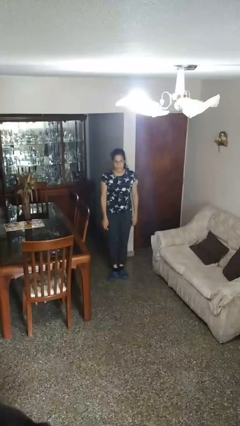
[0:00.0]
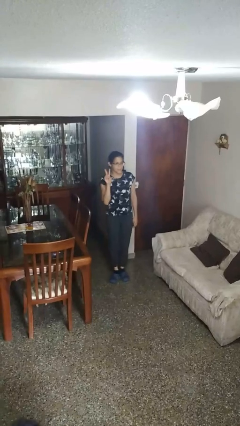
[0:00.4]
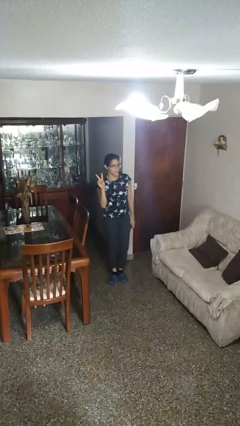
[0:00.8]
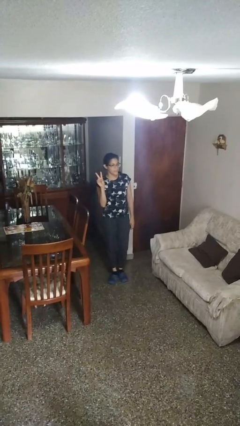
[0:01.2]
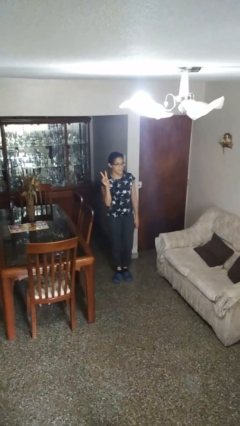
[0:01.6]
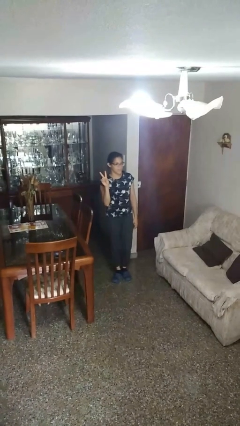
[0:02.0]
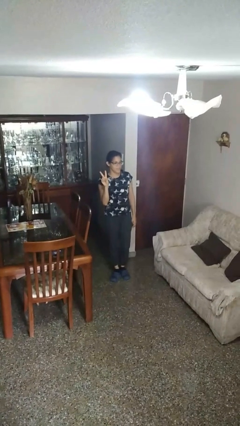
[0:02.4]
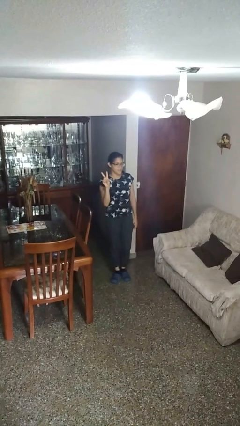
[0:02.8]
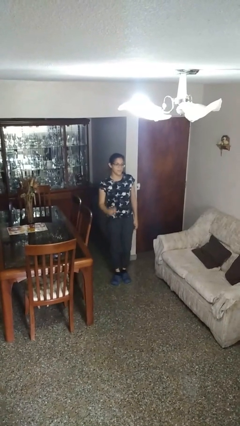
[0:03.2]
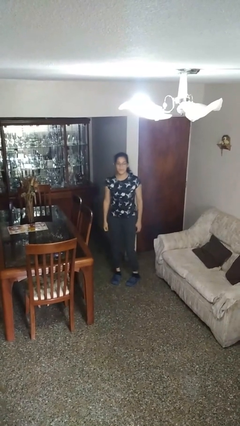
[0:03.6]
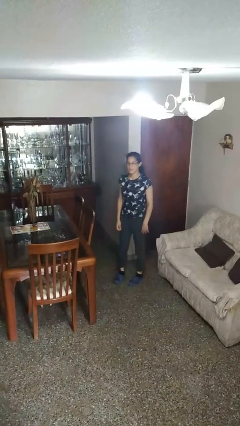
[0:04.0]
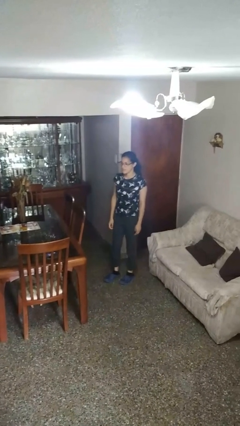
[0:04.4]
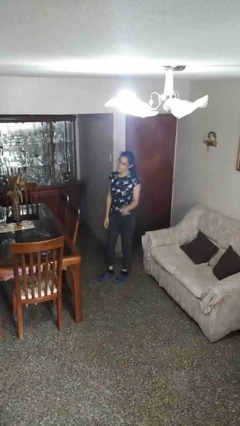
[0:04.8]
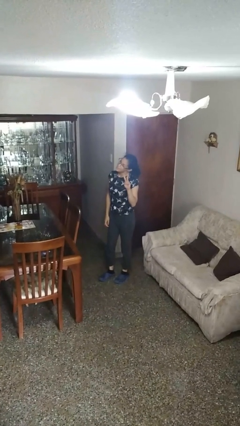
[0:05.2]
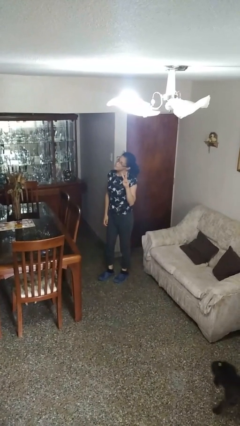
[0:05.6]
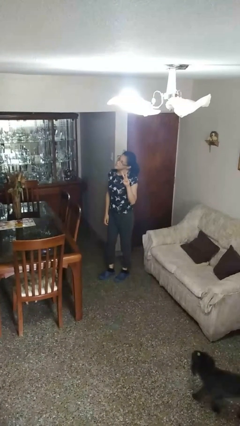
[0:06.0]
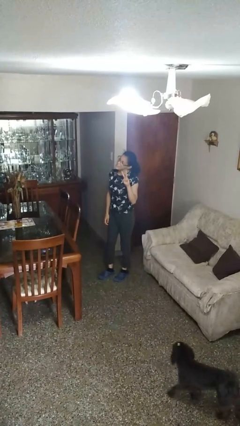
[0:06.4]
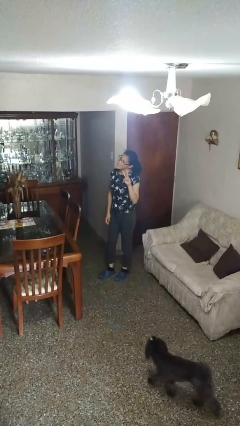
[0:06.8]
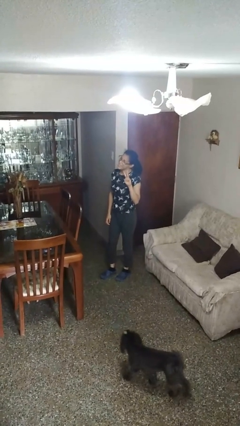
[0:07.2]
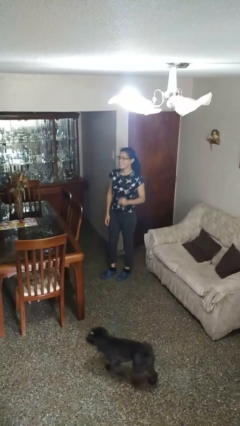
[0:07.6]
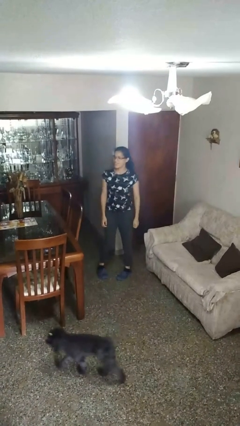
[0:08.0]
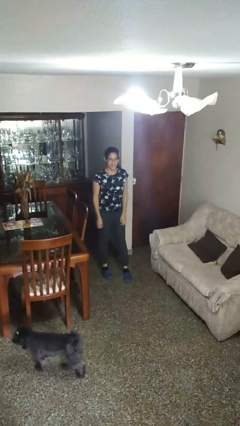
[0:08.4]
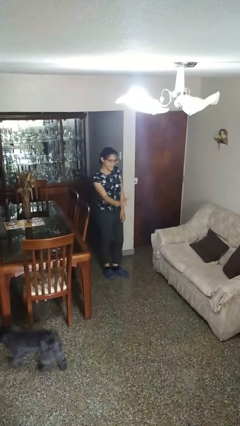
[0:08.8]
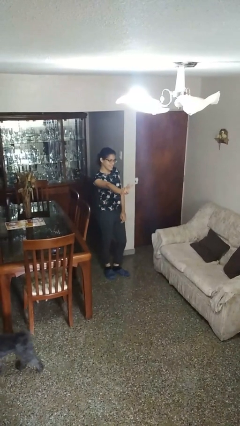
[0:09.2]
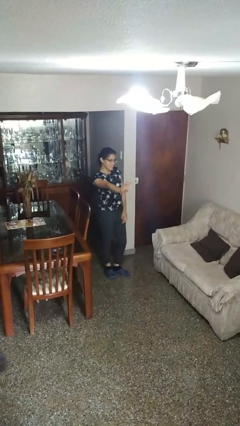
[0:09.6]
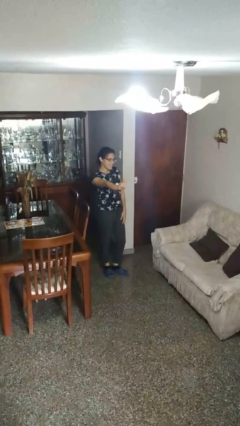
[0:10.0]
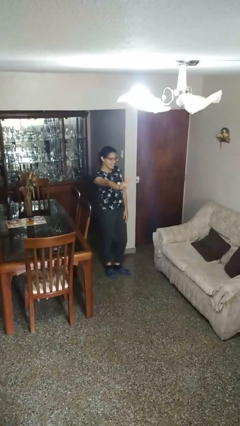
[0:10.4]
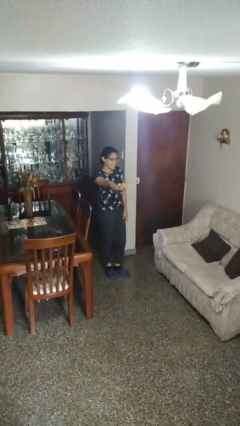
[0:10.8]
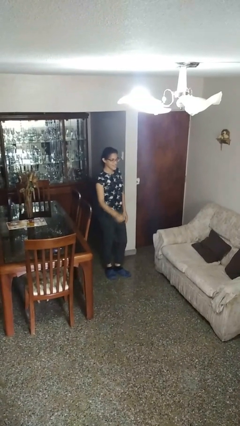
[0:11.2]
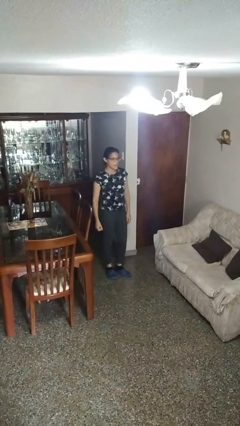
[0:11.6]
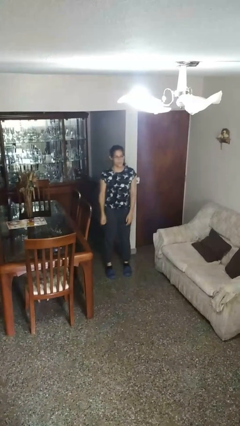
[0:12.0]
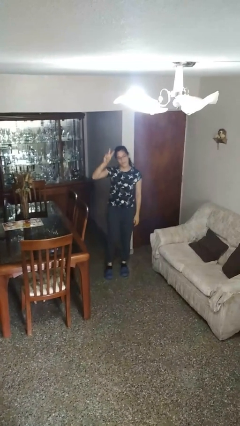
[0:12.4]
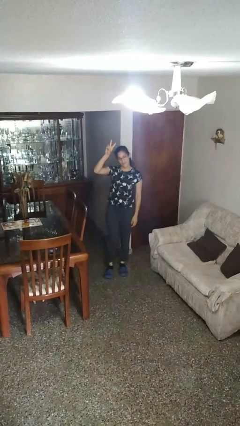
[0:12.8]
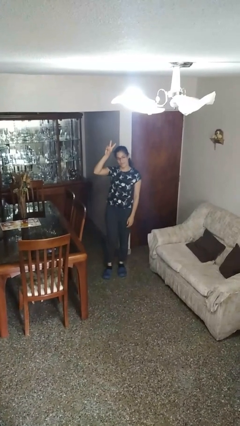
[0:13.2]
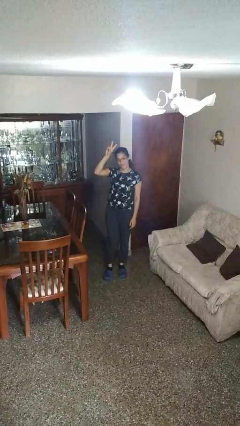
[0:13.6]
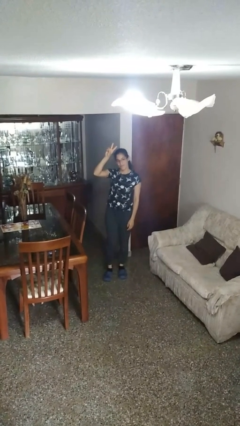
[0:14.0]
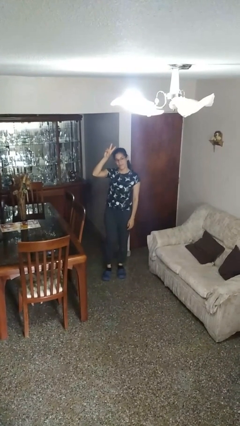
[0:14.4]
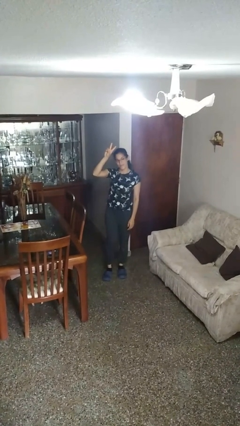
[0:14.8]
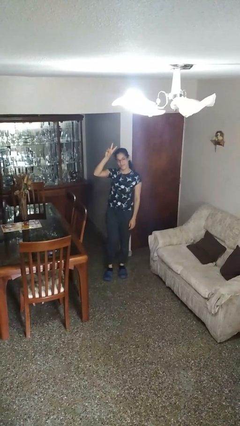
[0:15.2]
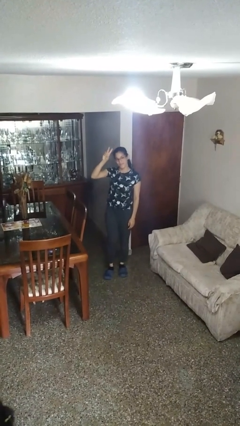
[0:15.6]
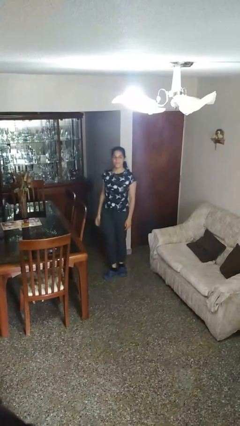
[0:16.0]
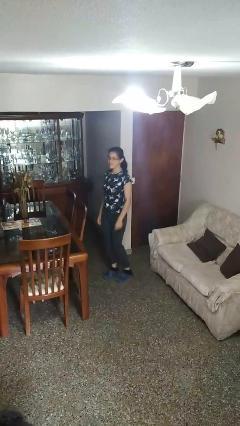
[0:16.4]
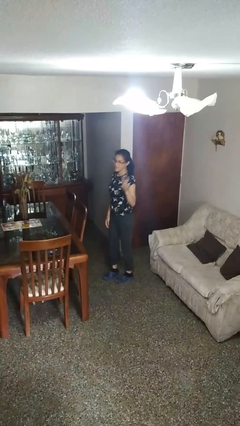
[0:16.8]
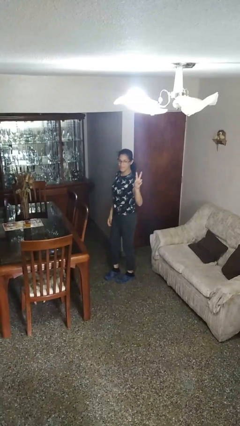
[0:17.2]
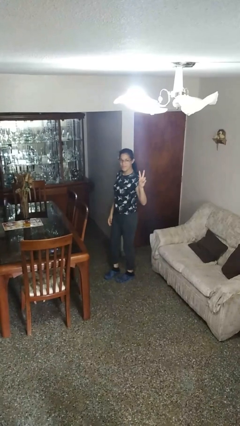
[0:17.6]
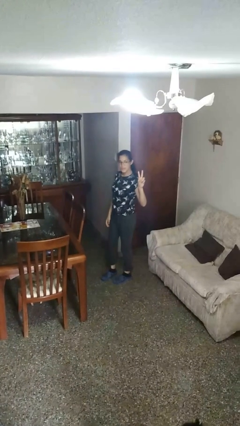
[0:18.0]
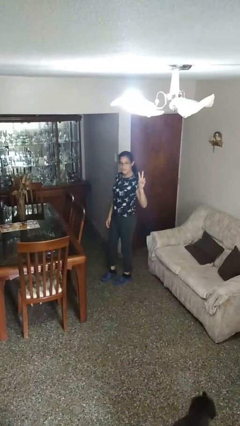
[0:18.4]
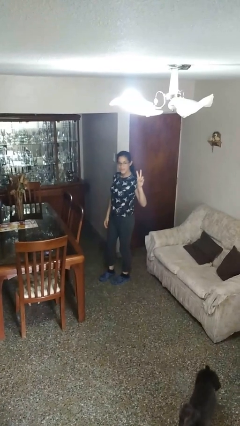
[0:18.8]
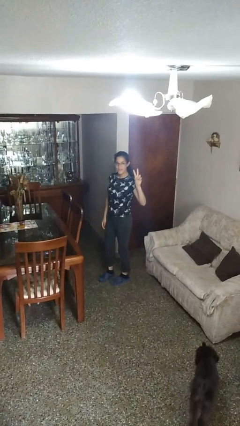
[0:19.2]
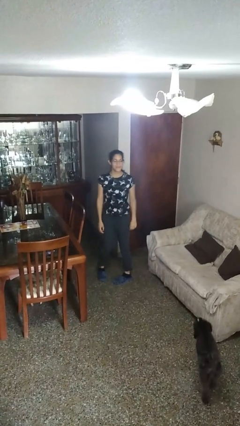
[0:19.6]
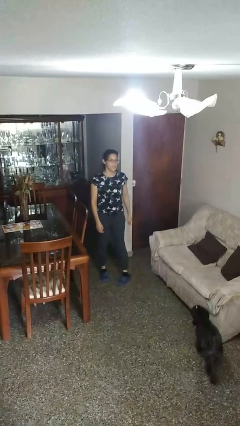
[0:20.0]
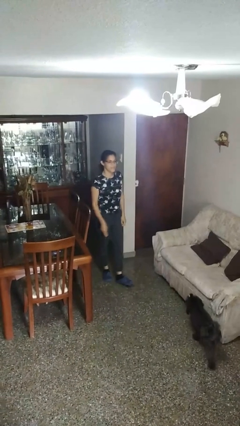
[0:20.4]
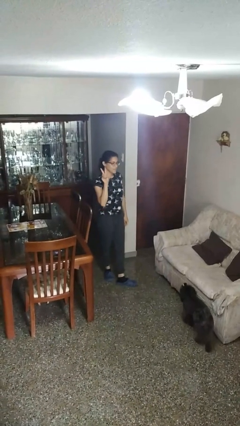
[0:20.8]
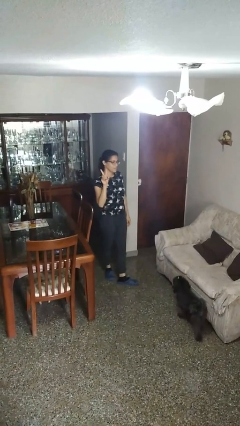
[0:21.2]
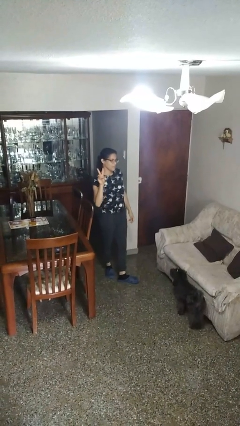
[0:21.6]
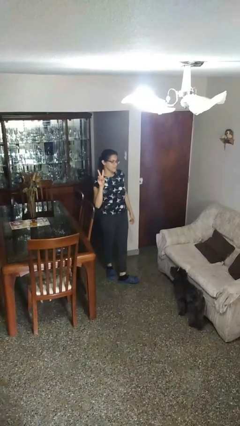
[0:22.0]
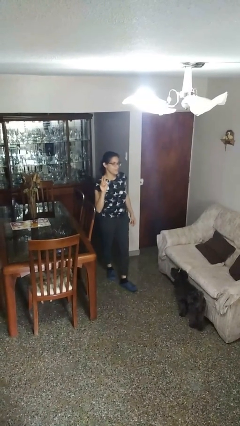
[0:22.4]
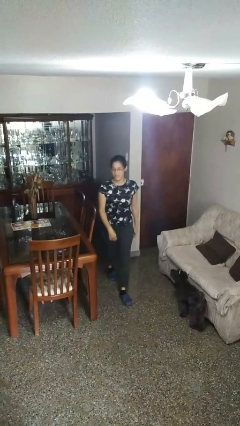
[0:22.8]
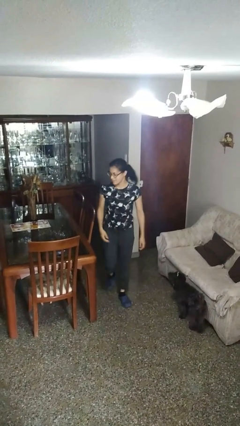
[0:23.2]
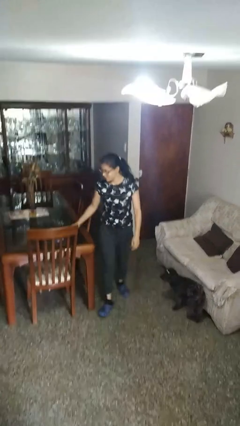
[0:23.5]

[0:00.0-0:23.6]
person gestures peace

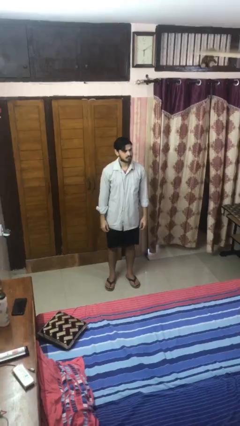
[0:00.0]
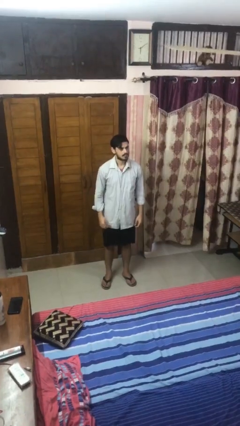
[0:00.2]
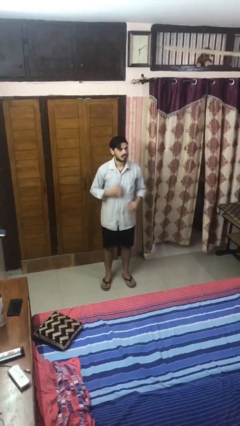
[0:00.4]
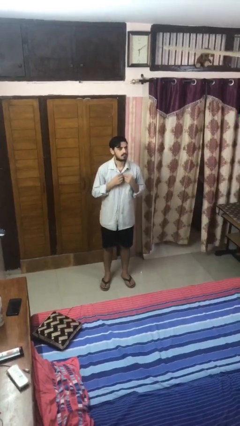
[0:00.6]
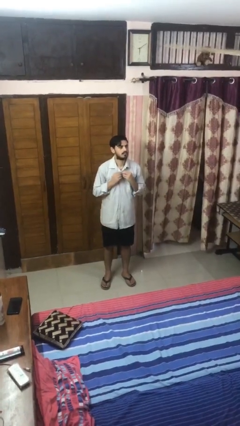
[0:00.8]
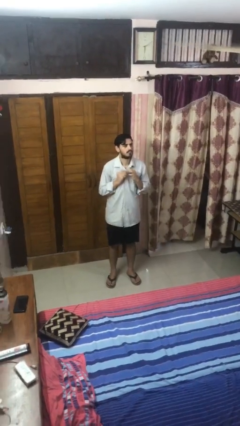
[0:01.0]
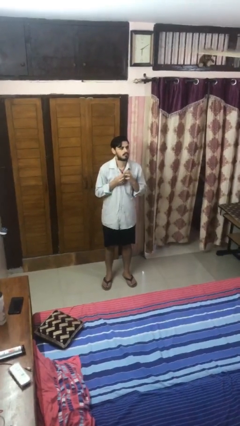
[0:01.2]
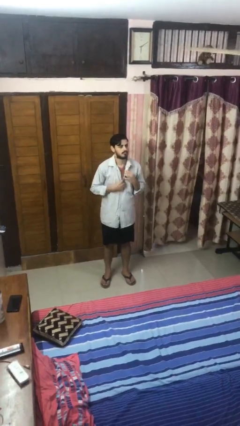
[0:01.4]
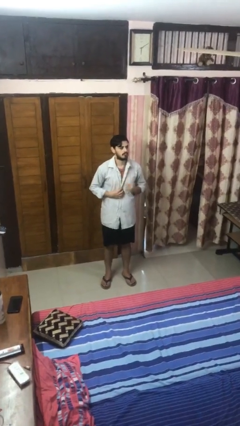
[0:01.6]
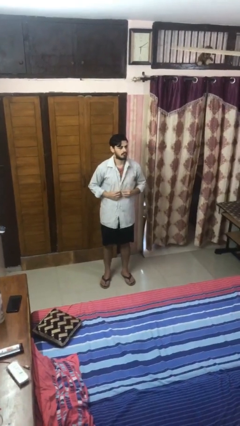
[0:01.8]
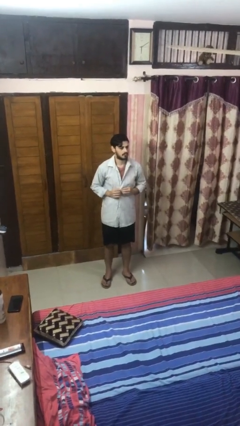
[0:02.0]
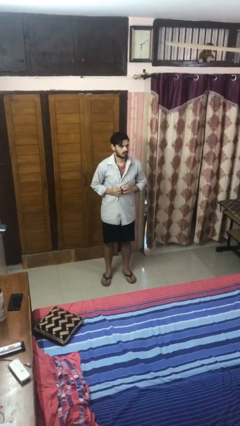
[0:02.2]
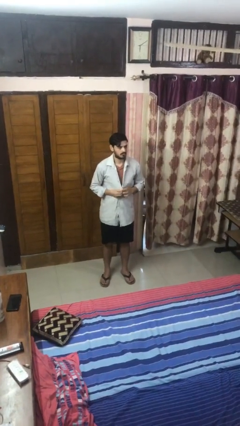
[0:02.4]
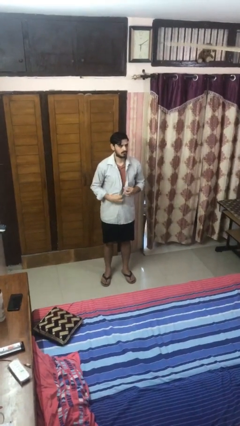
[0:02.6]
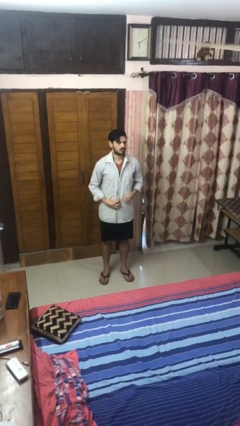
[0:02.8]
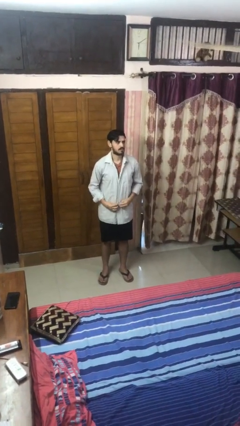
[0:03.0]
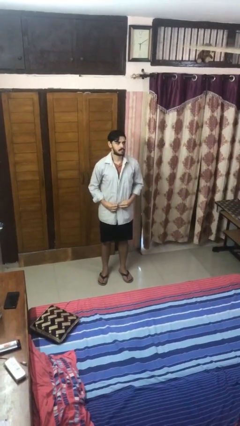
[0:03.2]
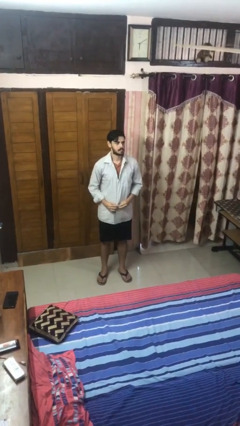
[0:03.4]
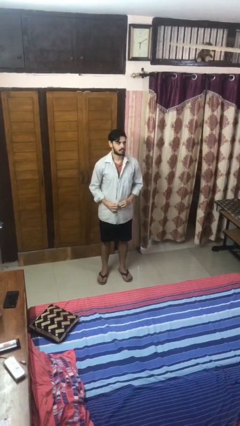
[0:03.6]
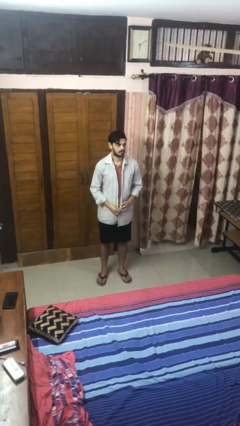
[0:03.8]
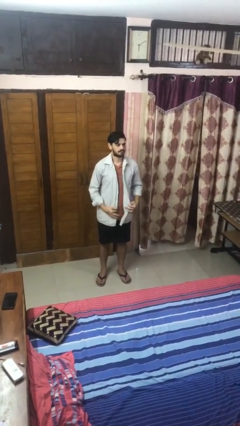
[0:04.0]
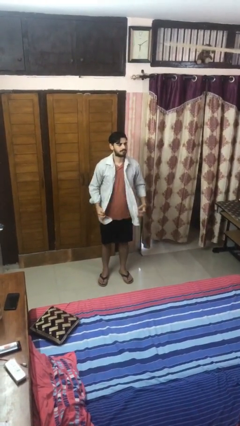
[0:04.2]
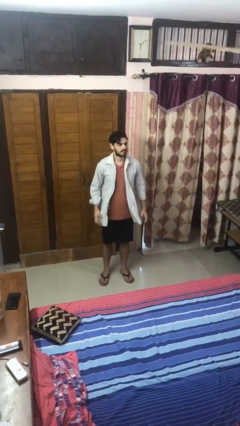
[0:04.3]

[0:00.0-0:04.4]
person unbuttons shirt

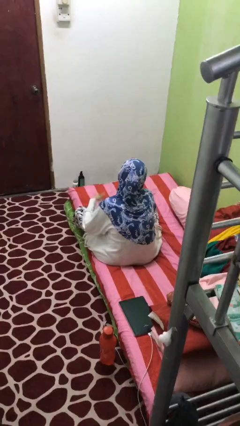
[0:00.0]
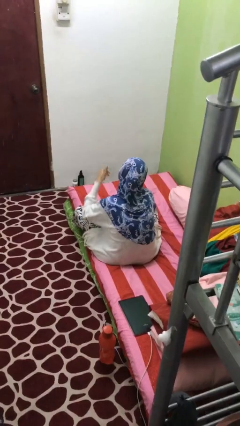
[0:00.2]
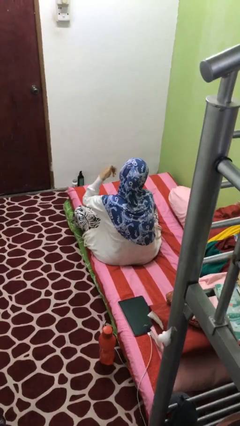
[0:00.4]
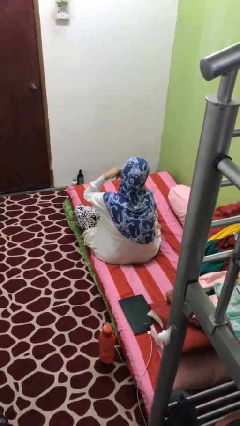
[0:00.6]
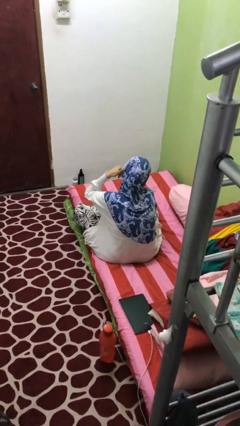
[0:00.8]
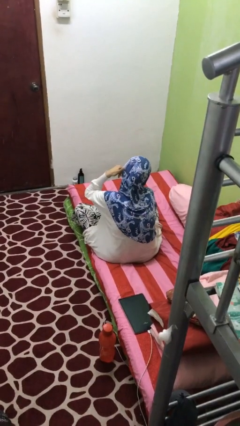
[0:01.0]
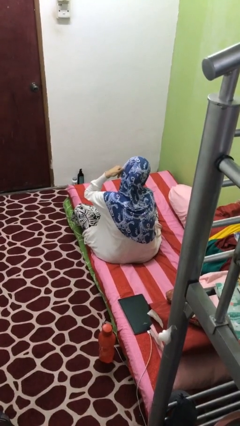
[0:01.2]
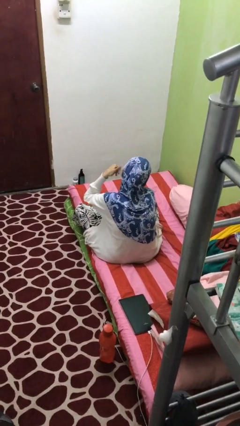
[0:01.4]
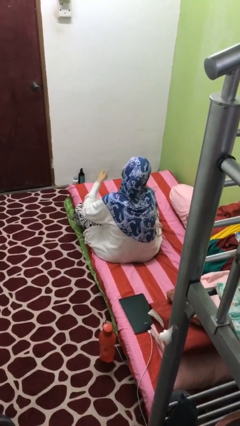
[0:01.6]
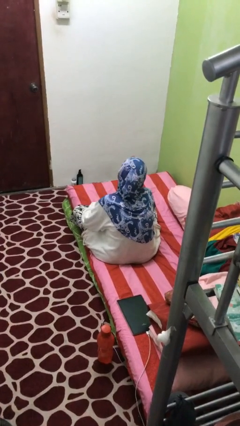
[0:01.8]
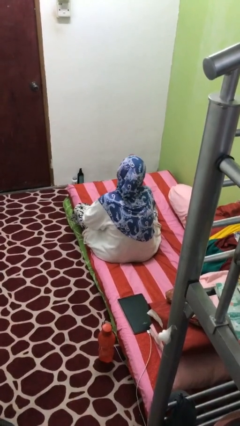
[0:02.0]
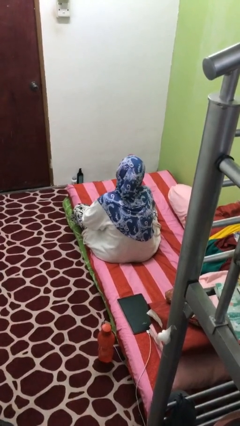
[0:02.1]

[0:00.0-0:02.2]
person gestures call me
